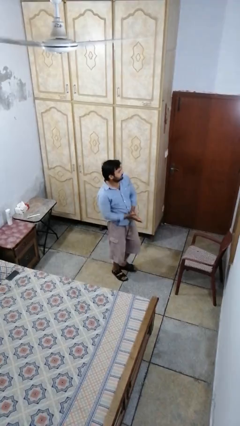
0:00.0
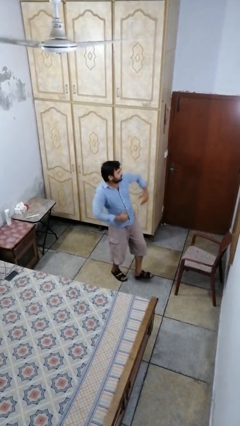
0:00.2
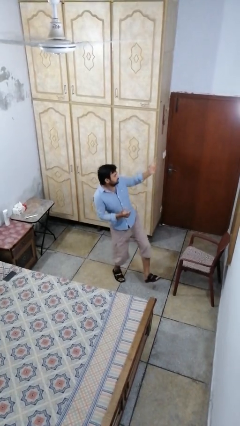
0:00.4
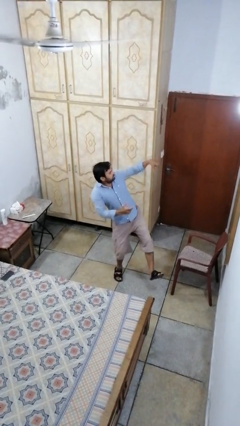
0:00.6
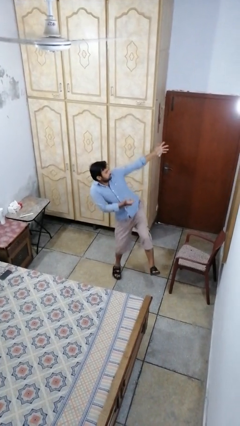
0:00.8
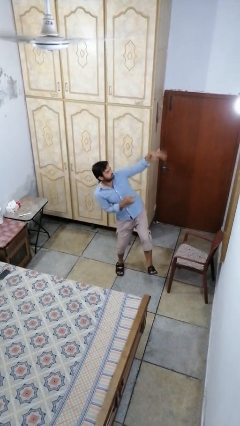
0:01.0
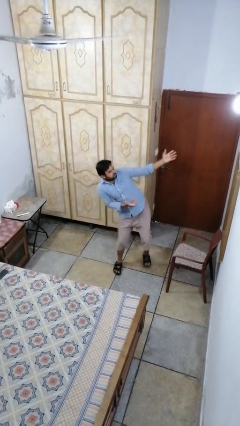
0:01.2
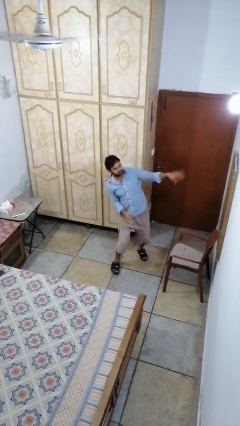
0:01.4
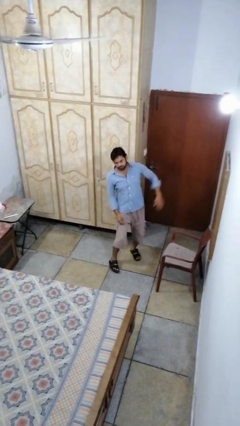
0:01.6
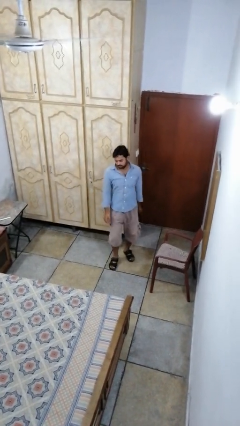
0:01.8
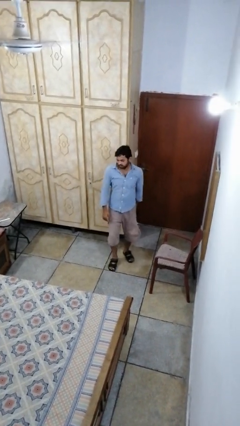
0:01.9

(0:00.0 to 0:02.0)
person dances in place

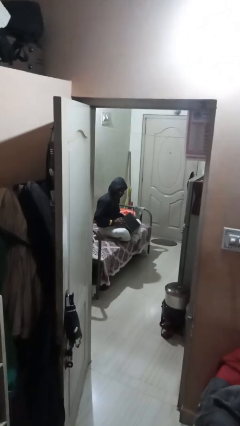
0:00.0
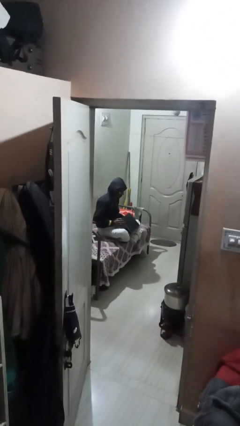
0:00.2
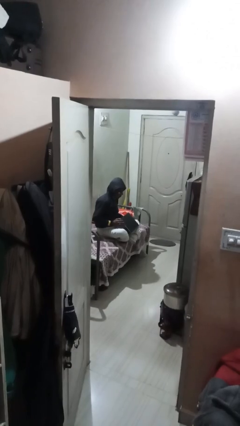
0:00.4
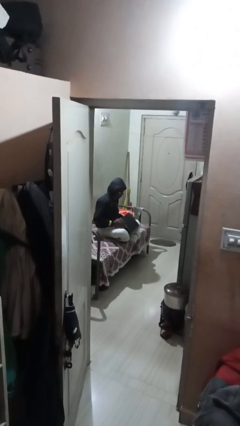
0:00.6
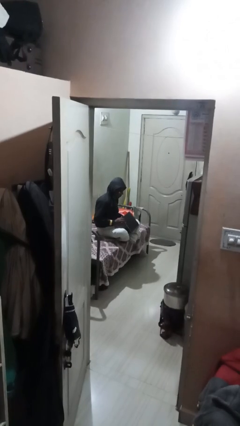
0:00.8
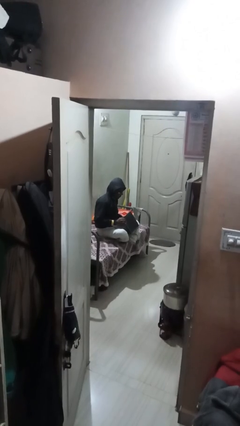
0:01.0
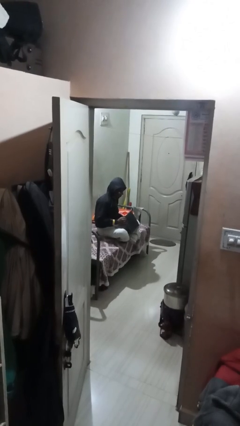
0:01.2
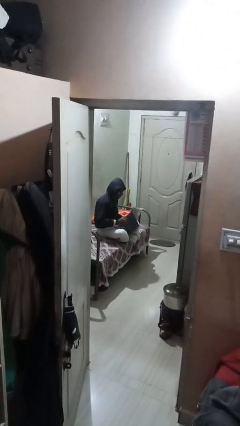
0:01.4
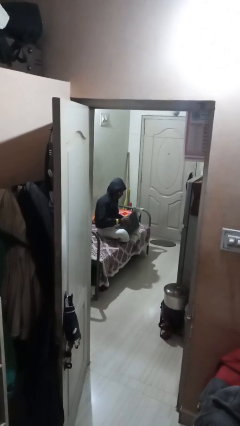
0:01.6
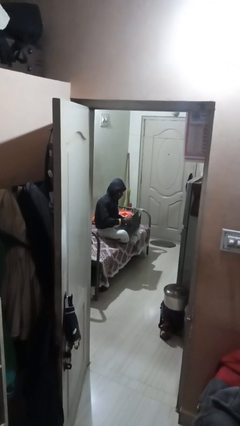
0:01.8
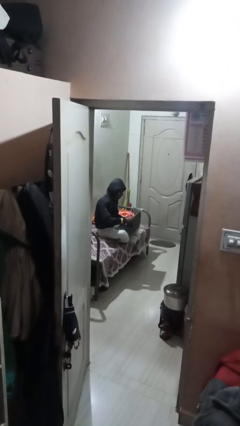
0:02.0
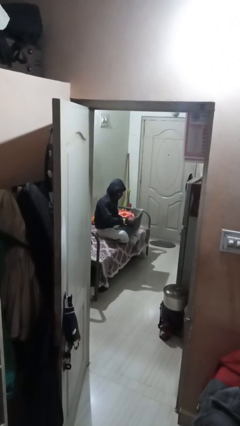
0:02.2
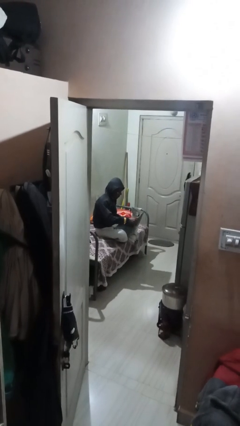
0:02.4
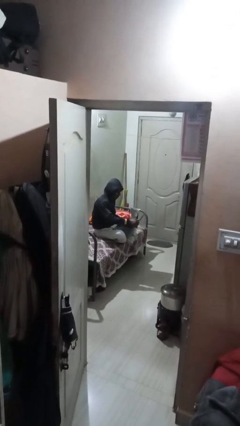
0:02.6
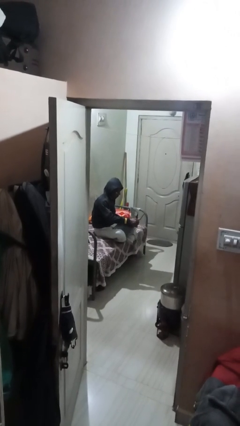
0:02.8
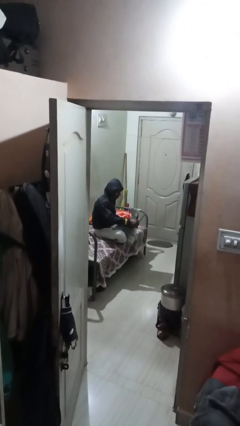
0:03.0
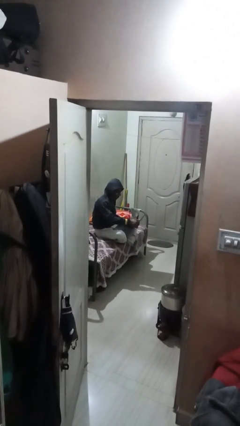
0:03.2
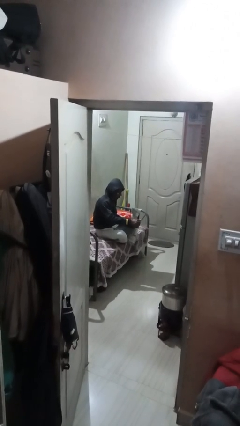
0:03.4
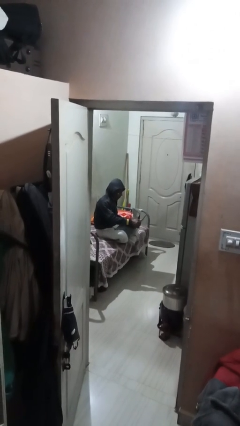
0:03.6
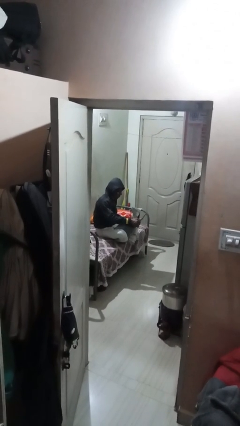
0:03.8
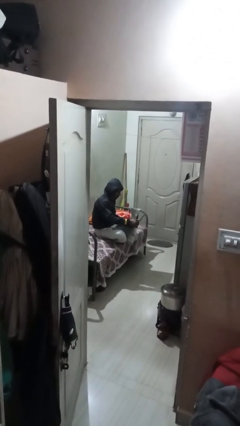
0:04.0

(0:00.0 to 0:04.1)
person interacts with laptop

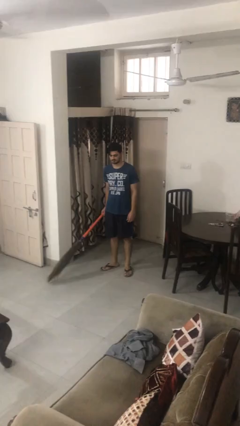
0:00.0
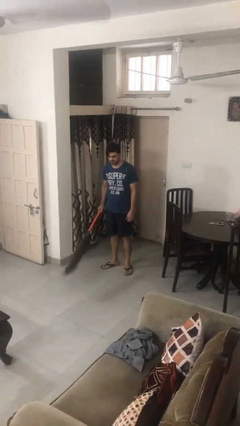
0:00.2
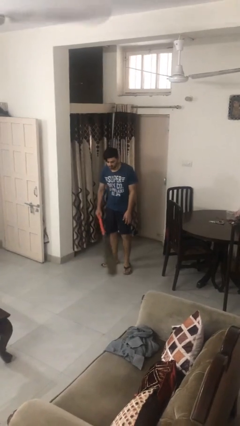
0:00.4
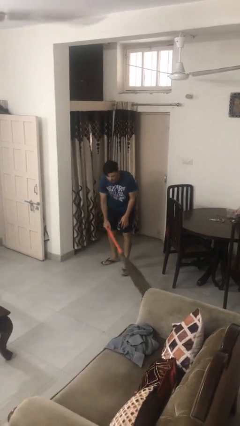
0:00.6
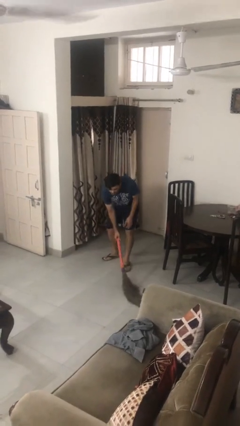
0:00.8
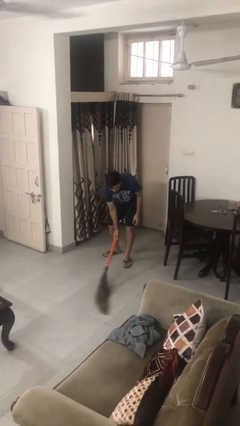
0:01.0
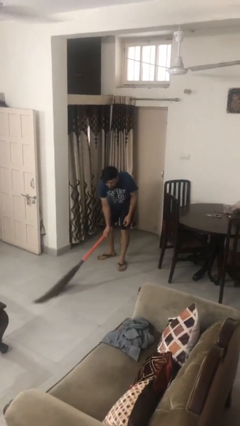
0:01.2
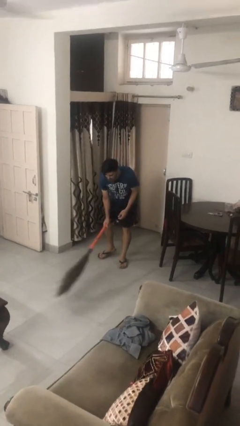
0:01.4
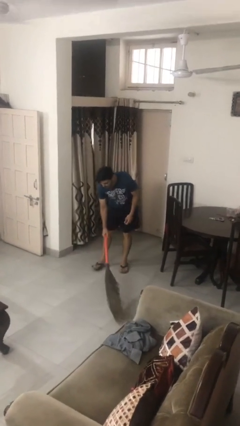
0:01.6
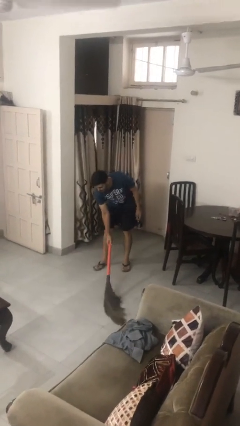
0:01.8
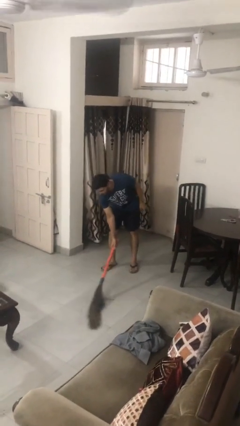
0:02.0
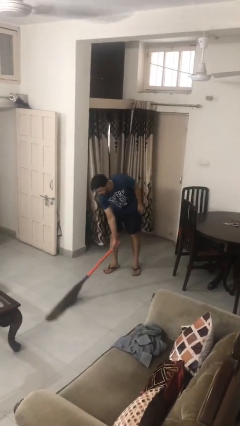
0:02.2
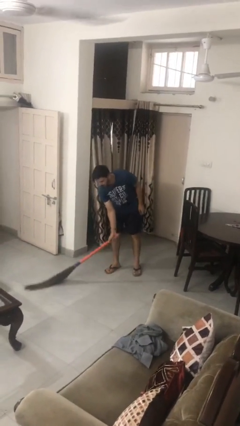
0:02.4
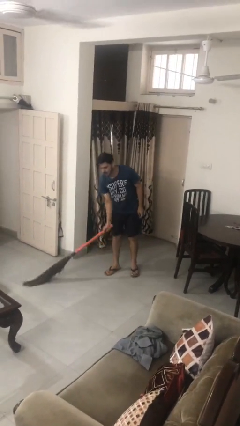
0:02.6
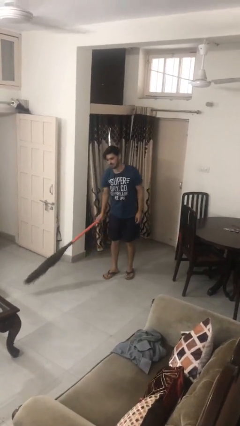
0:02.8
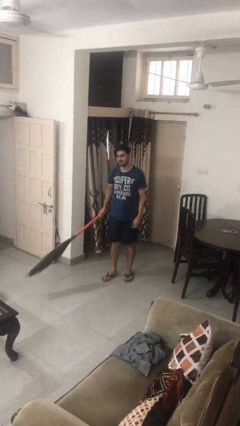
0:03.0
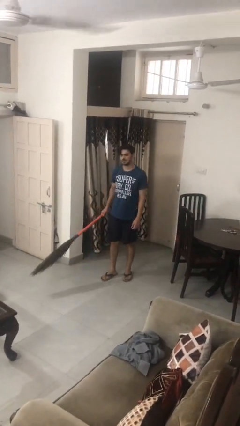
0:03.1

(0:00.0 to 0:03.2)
person sweeps floor

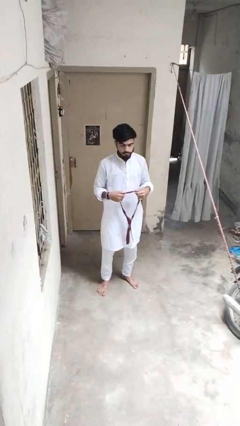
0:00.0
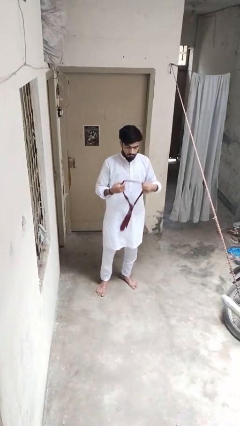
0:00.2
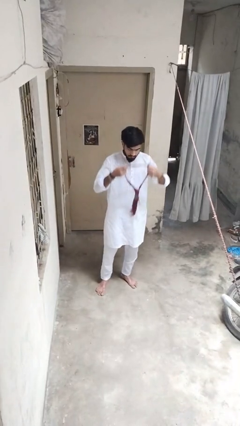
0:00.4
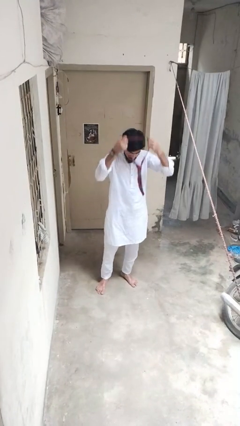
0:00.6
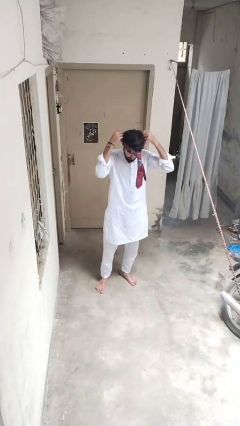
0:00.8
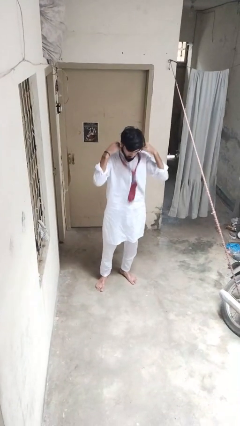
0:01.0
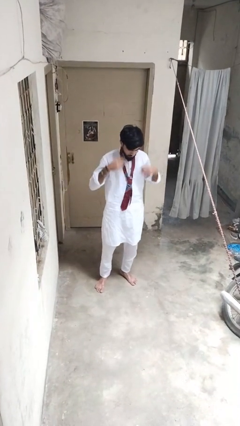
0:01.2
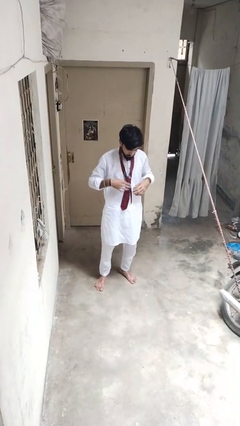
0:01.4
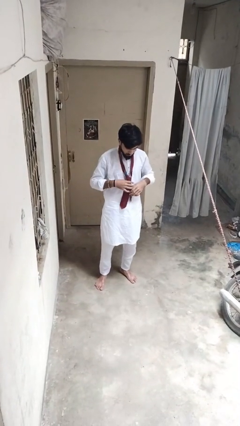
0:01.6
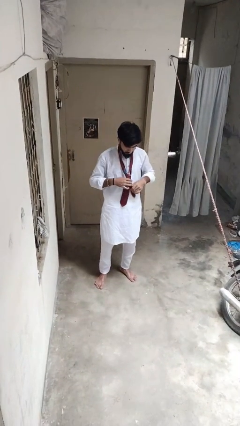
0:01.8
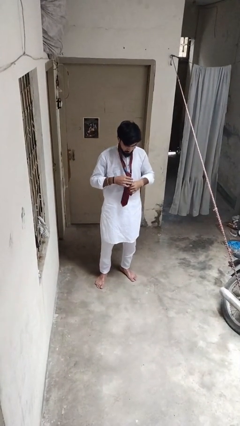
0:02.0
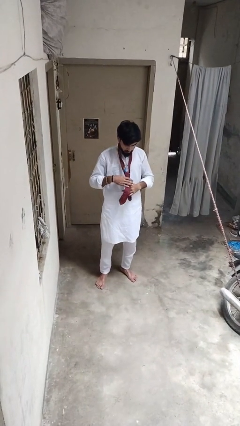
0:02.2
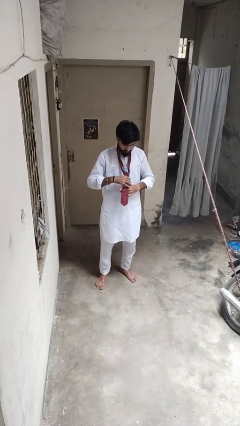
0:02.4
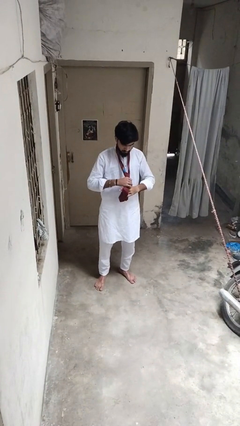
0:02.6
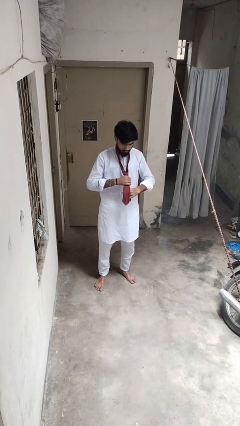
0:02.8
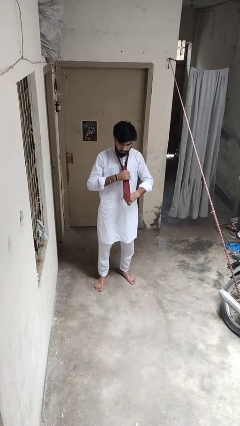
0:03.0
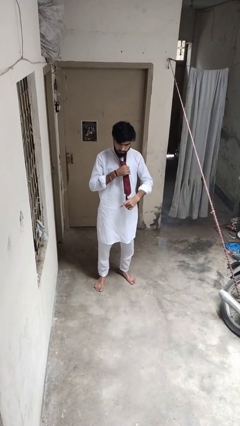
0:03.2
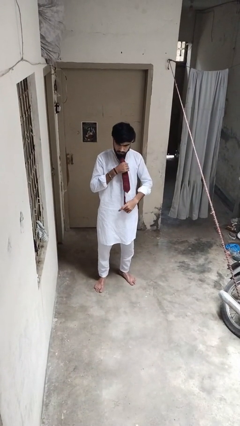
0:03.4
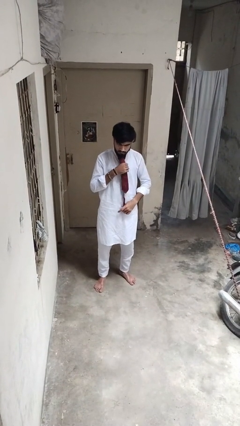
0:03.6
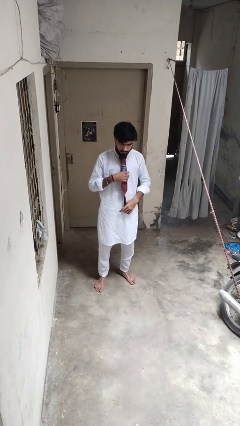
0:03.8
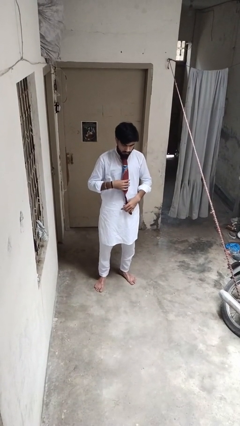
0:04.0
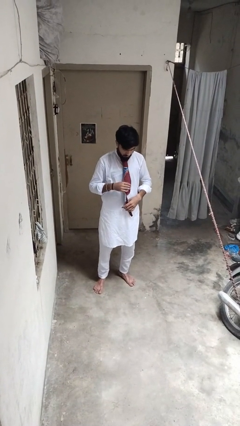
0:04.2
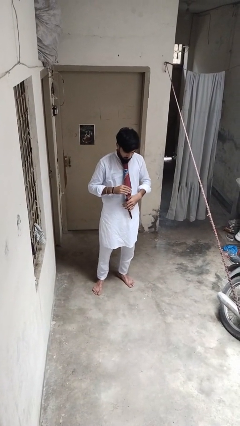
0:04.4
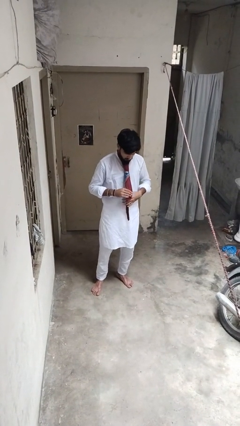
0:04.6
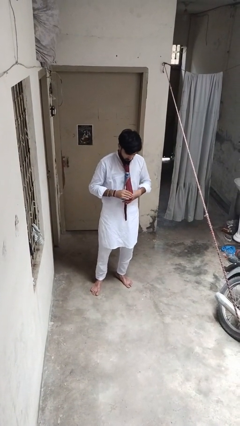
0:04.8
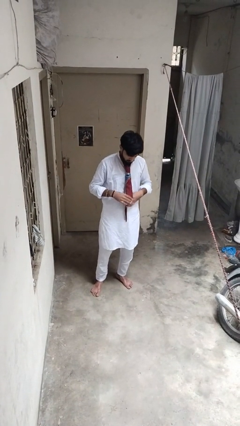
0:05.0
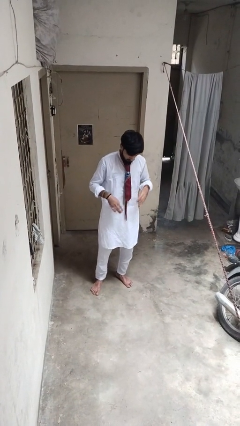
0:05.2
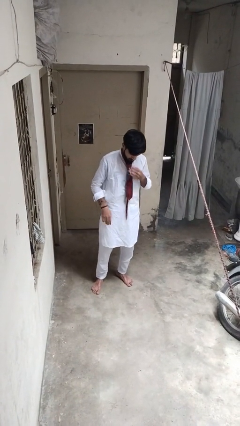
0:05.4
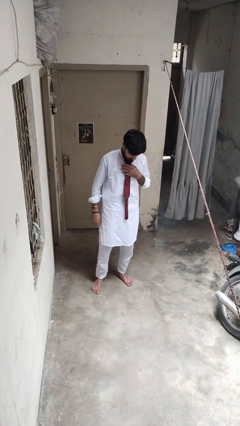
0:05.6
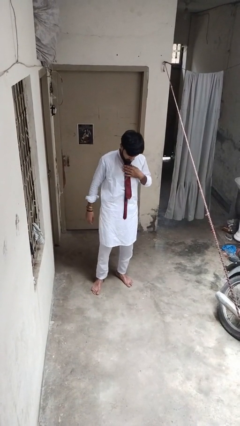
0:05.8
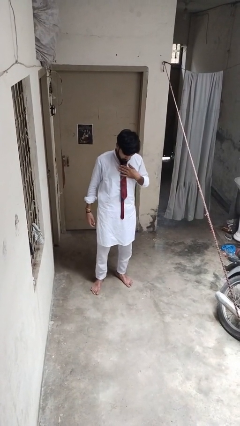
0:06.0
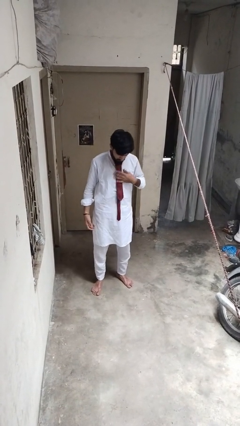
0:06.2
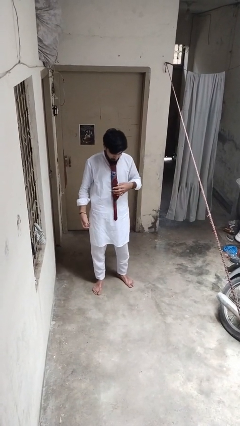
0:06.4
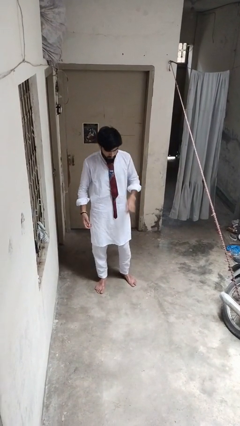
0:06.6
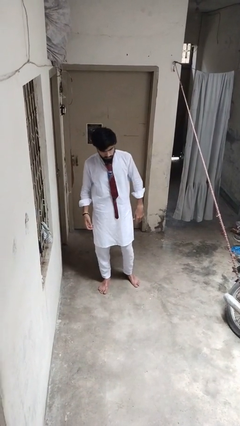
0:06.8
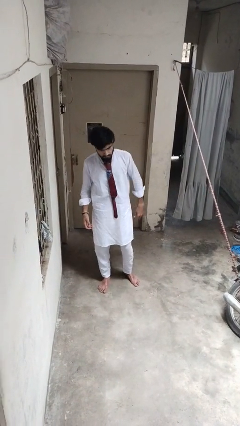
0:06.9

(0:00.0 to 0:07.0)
person puts on necktie

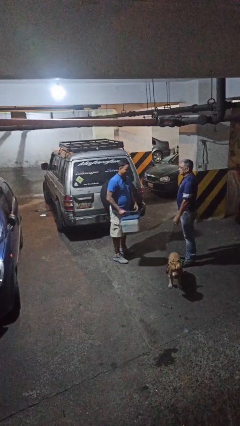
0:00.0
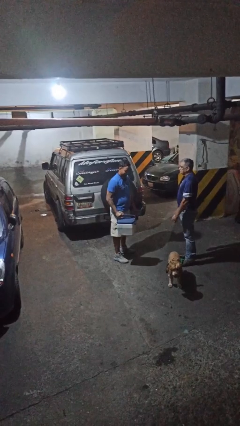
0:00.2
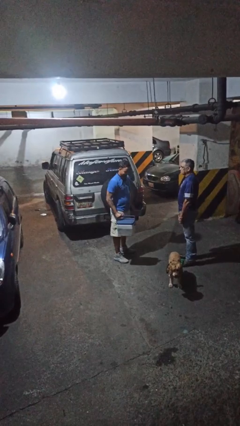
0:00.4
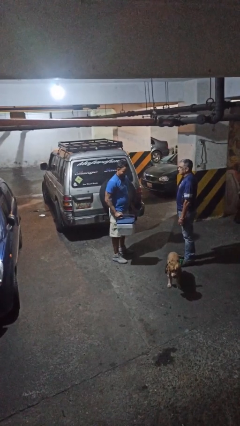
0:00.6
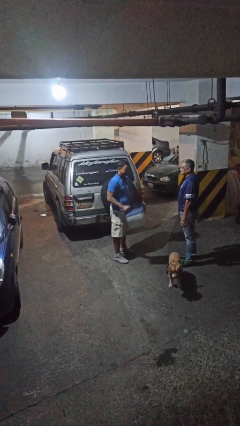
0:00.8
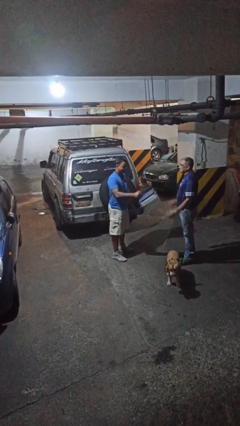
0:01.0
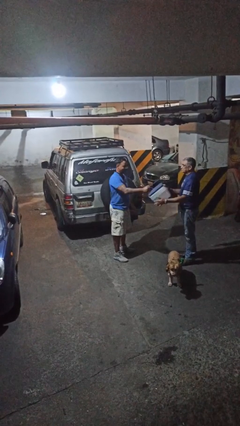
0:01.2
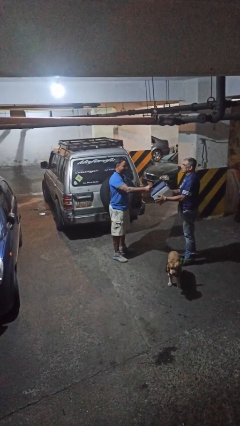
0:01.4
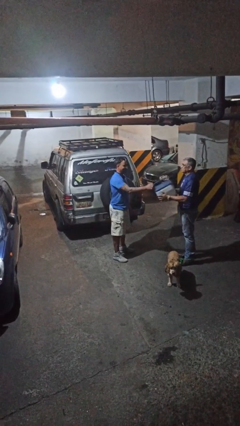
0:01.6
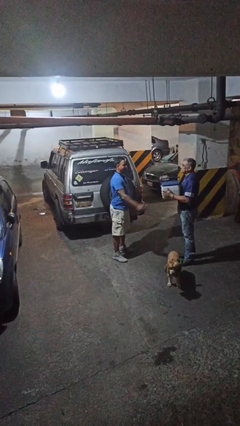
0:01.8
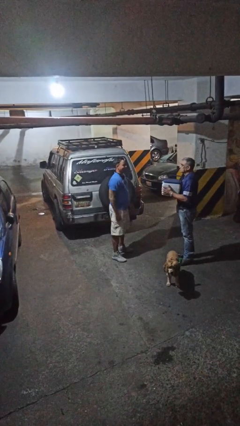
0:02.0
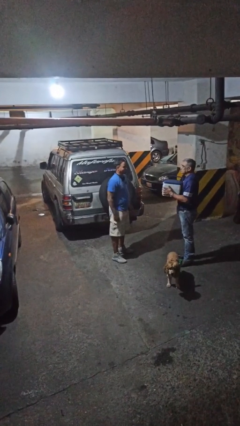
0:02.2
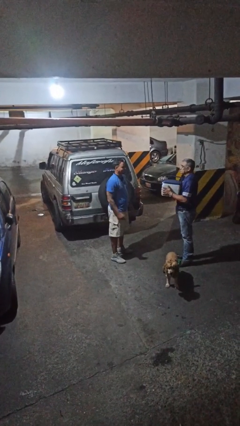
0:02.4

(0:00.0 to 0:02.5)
person transfers object to person
